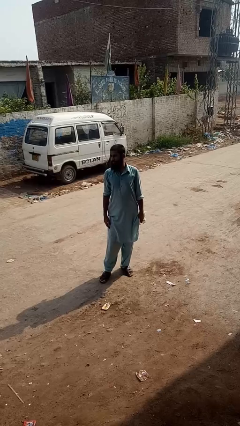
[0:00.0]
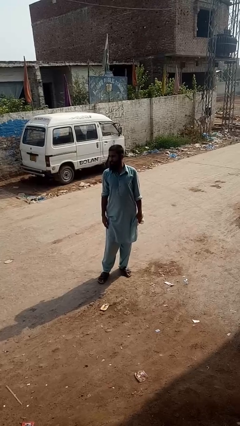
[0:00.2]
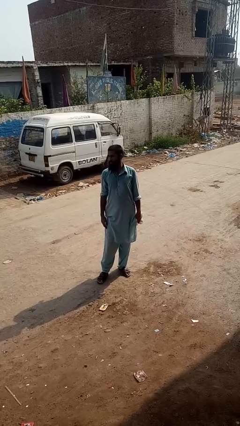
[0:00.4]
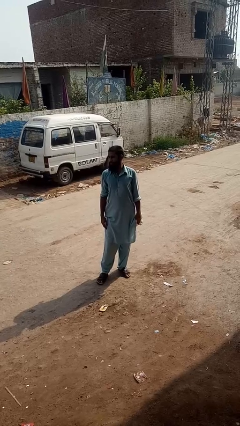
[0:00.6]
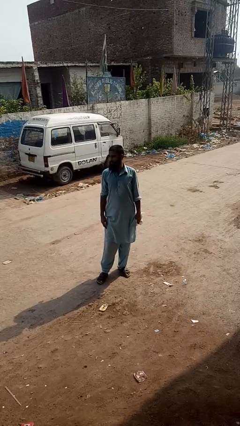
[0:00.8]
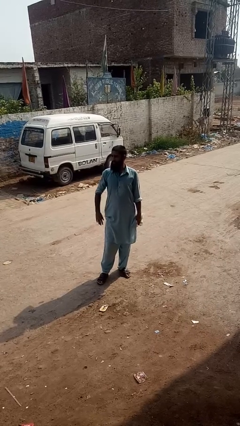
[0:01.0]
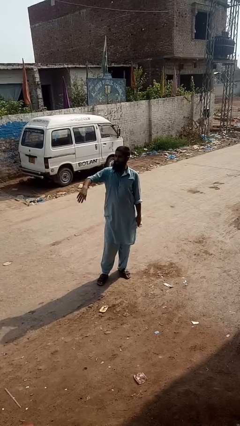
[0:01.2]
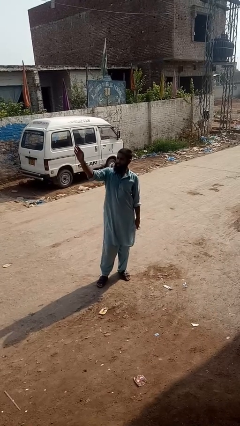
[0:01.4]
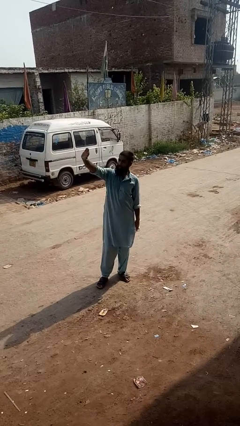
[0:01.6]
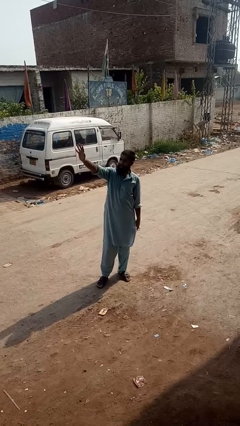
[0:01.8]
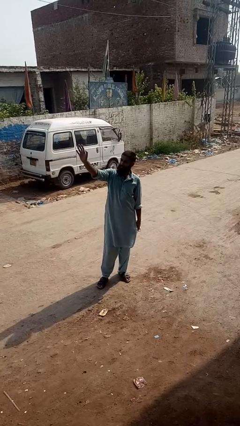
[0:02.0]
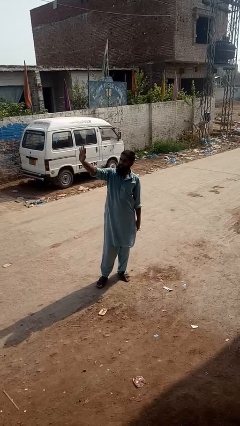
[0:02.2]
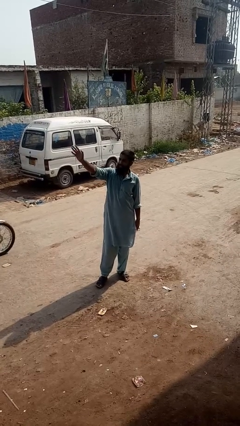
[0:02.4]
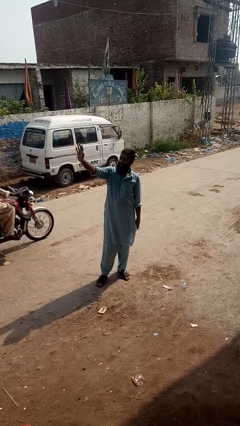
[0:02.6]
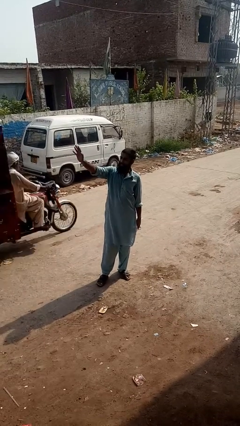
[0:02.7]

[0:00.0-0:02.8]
person waves at person

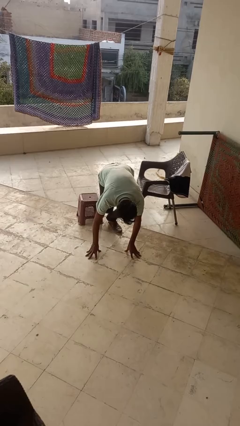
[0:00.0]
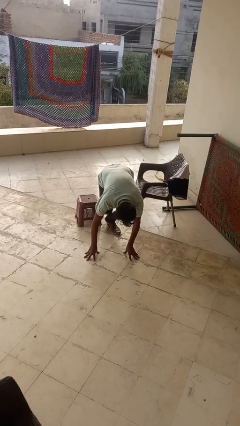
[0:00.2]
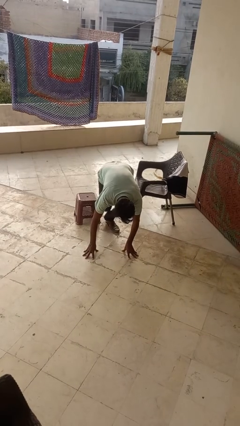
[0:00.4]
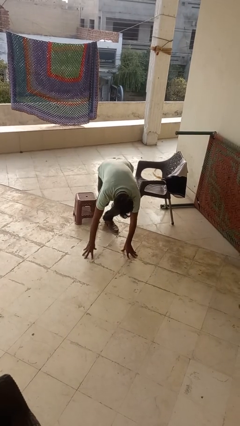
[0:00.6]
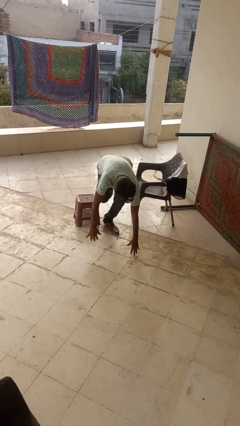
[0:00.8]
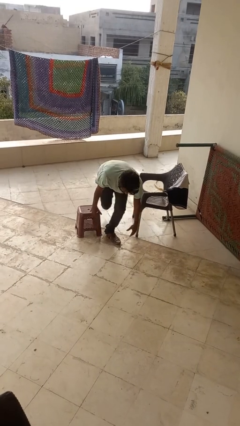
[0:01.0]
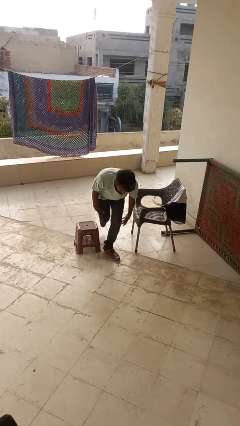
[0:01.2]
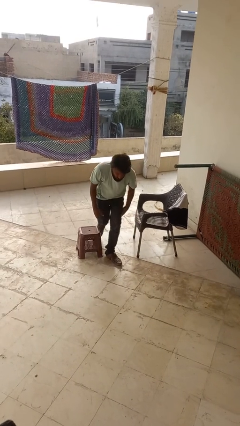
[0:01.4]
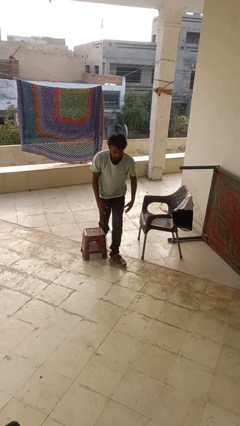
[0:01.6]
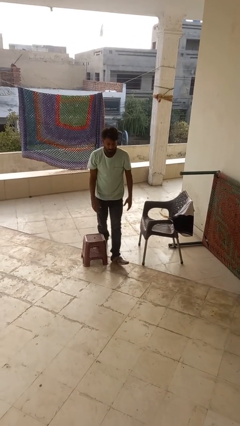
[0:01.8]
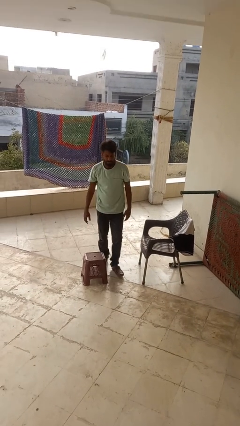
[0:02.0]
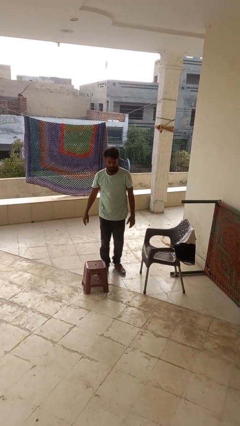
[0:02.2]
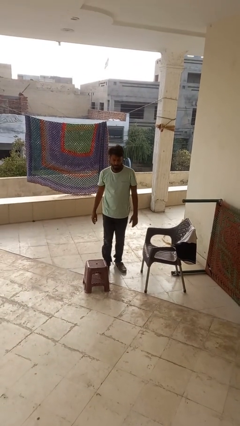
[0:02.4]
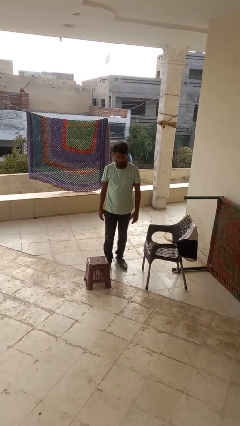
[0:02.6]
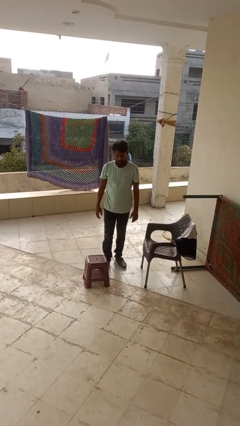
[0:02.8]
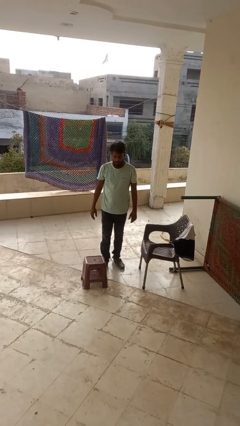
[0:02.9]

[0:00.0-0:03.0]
person stands up from floor

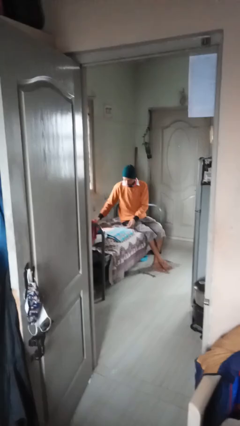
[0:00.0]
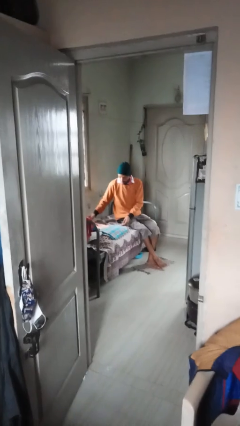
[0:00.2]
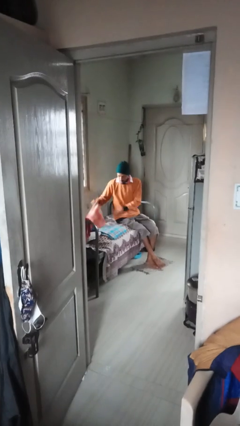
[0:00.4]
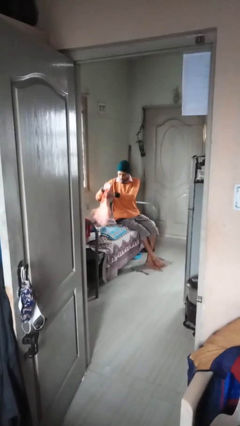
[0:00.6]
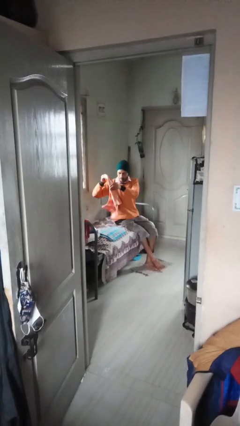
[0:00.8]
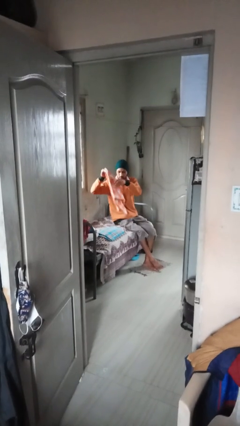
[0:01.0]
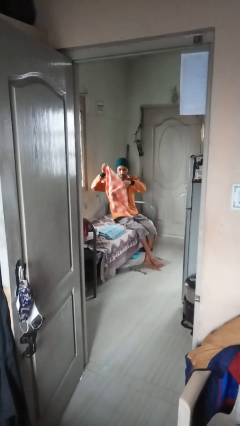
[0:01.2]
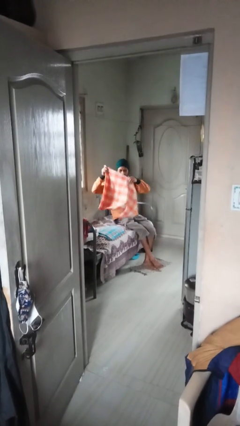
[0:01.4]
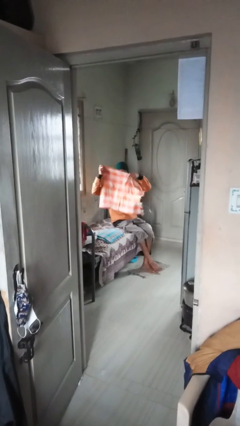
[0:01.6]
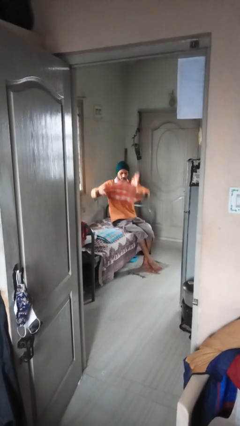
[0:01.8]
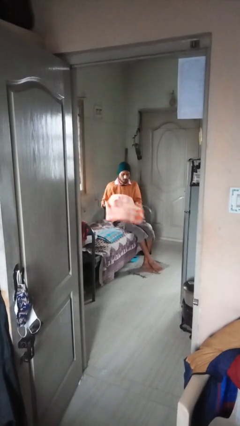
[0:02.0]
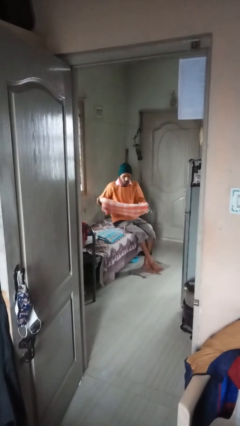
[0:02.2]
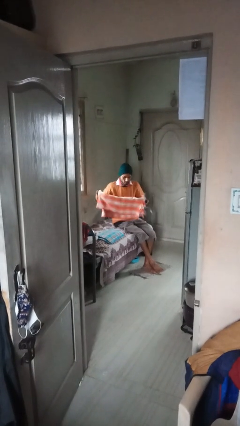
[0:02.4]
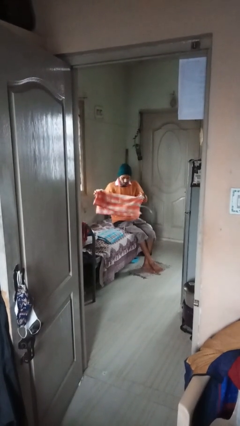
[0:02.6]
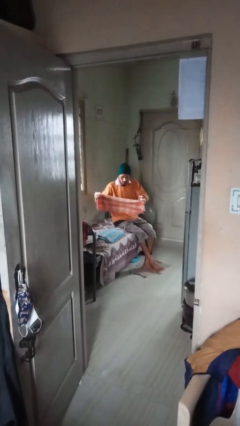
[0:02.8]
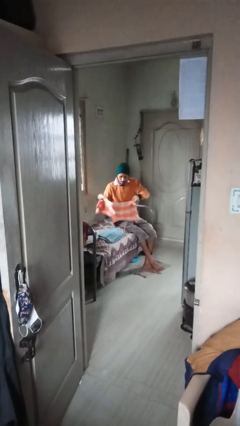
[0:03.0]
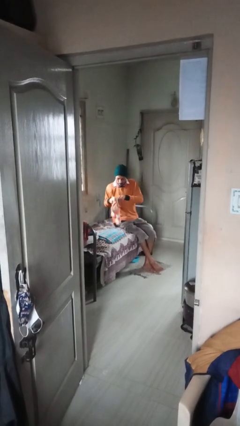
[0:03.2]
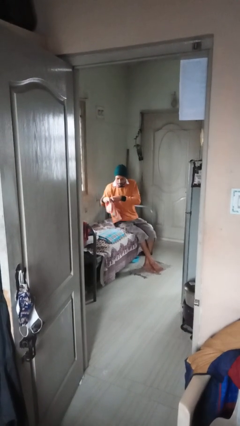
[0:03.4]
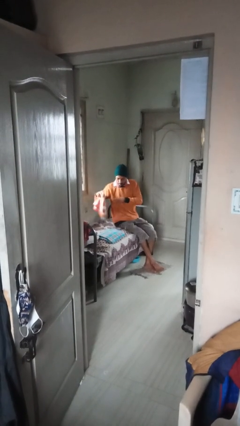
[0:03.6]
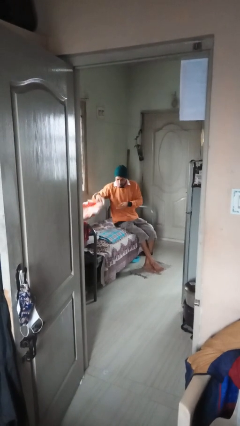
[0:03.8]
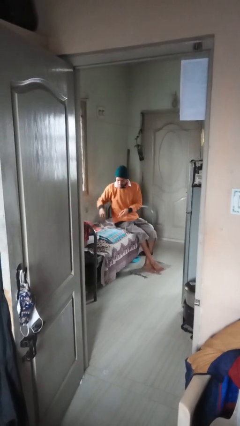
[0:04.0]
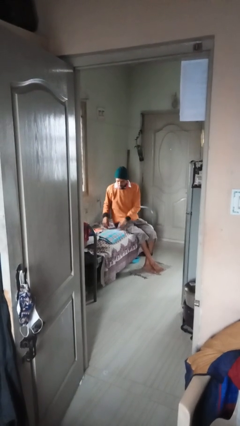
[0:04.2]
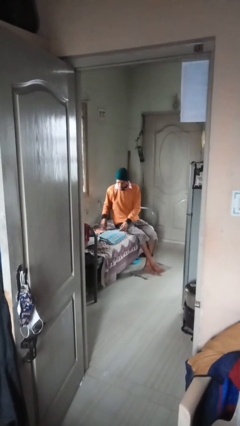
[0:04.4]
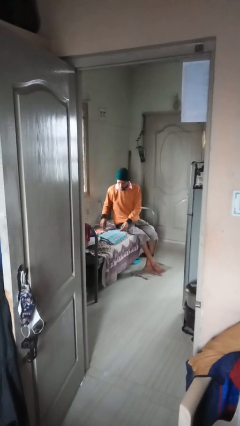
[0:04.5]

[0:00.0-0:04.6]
person folds towel

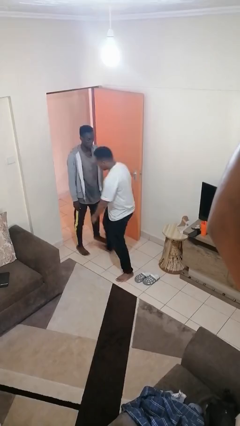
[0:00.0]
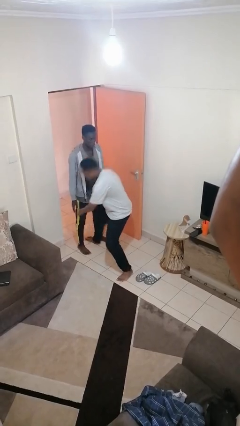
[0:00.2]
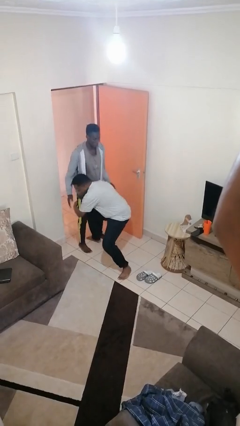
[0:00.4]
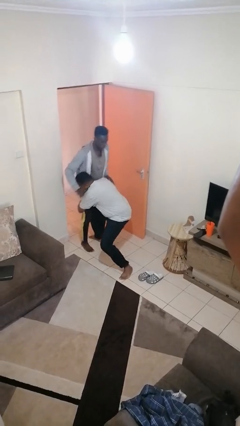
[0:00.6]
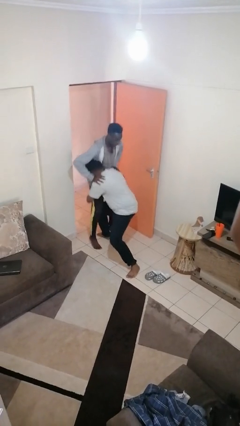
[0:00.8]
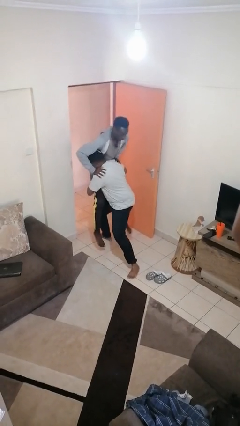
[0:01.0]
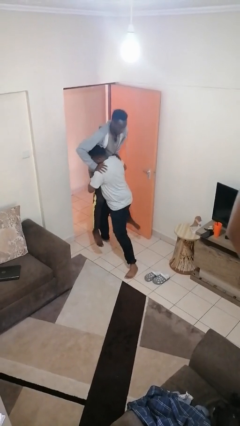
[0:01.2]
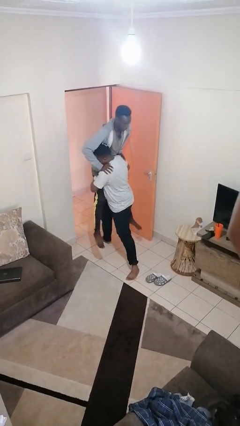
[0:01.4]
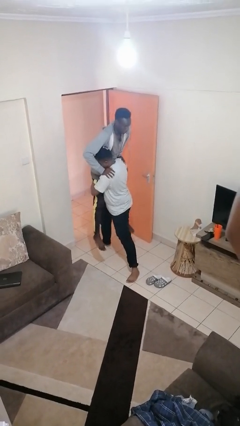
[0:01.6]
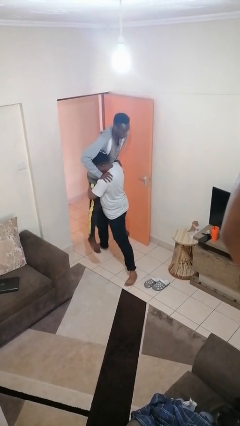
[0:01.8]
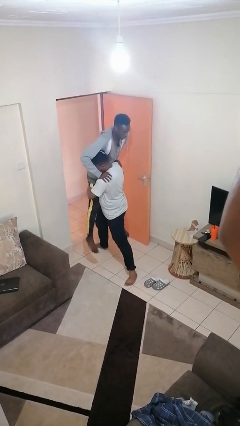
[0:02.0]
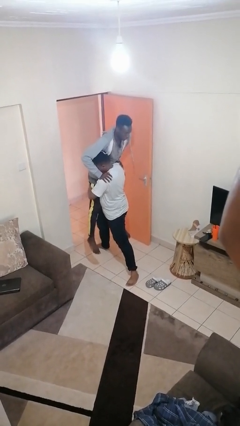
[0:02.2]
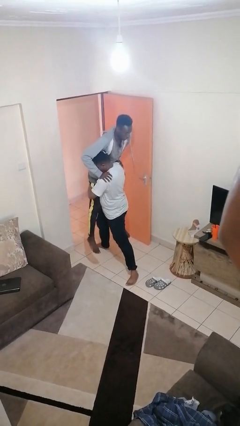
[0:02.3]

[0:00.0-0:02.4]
person picks up person

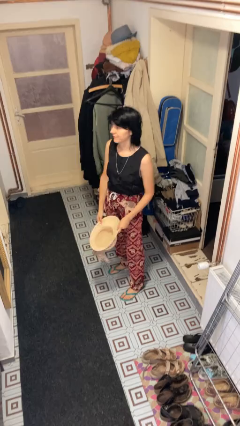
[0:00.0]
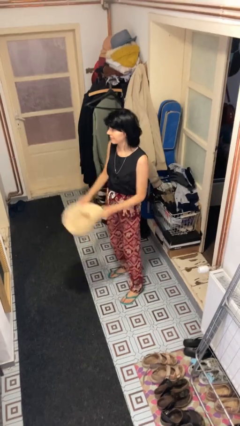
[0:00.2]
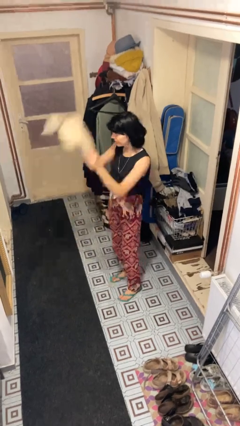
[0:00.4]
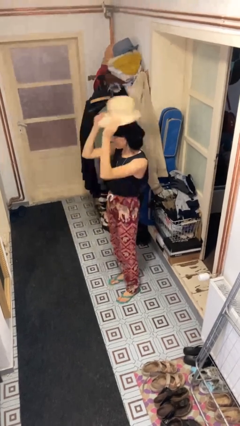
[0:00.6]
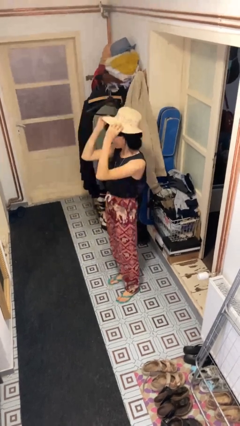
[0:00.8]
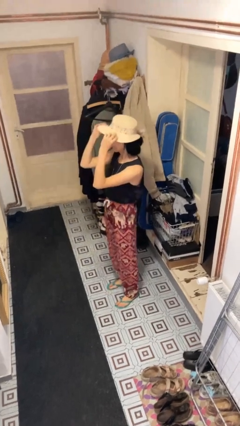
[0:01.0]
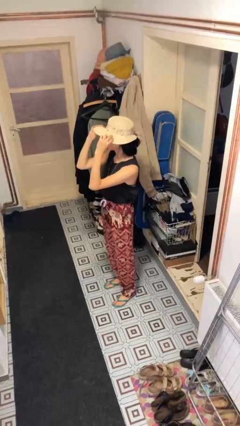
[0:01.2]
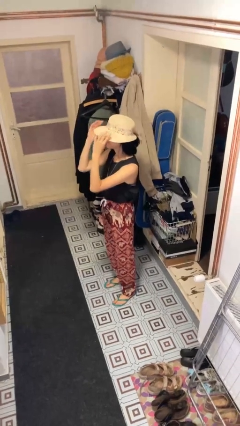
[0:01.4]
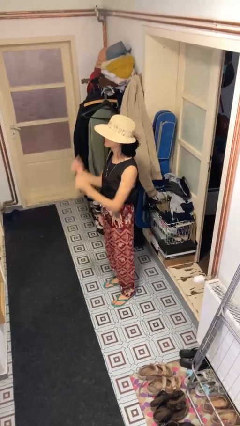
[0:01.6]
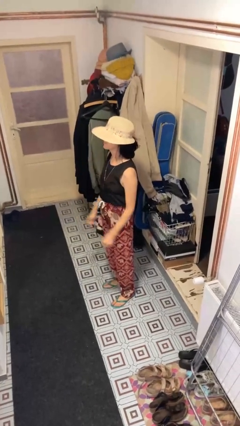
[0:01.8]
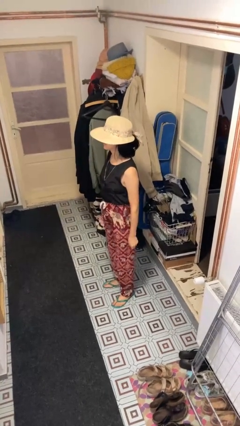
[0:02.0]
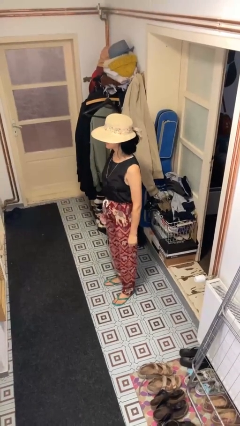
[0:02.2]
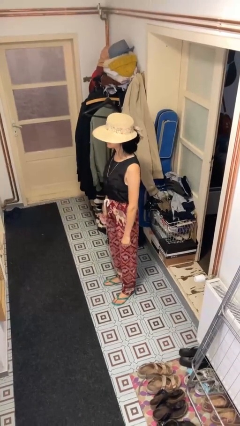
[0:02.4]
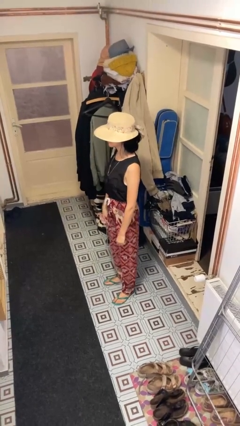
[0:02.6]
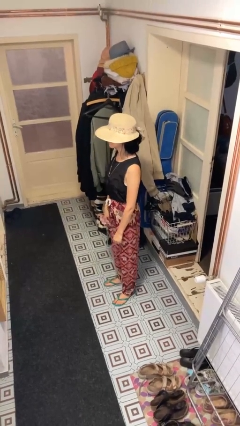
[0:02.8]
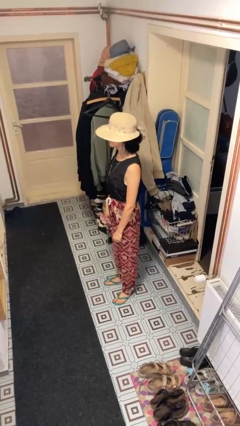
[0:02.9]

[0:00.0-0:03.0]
person puts on hat

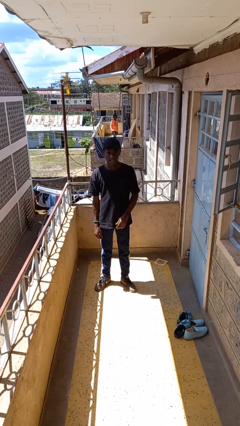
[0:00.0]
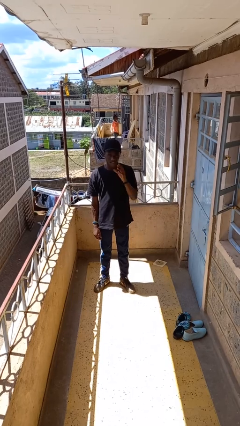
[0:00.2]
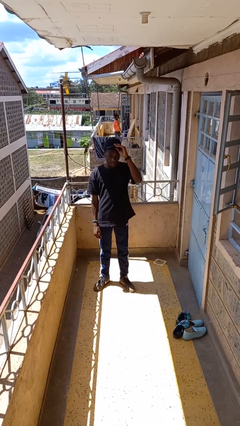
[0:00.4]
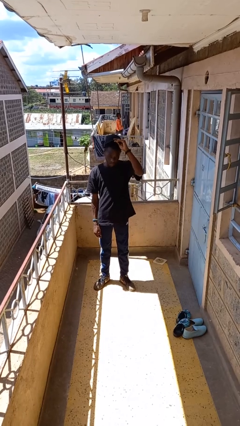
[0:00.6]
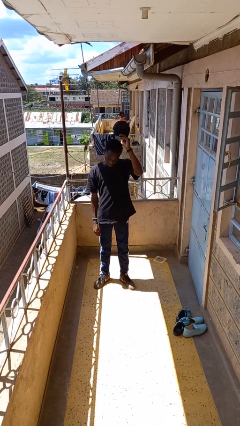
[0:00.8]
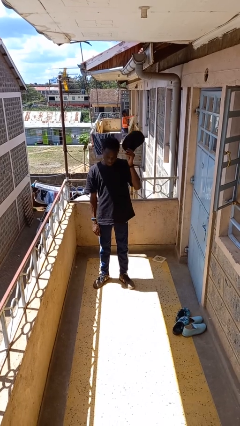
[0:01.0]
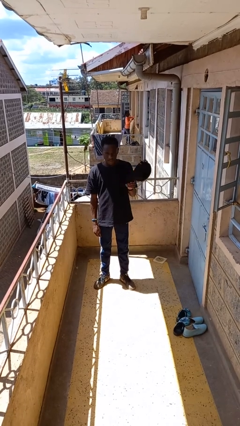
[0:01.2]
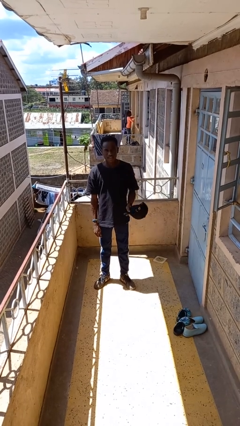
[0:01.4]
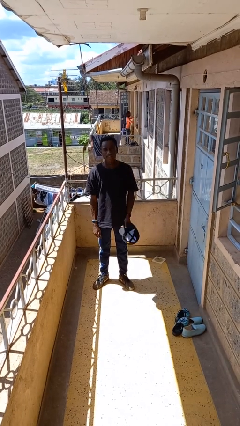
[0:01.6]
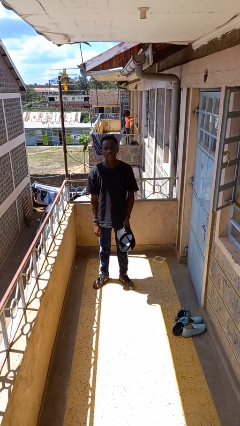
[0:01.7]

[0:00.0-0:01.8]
person takes off hat
